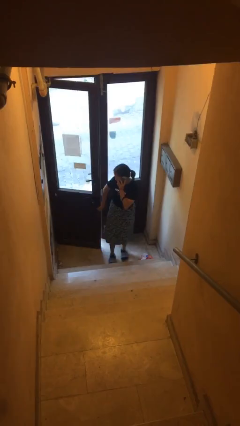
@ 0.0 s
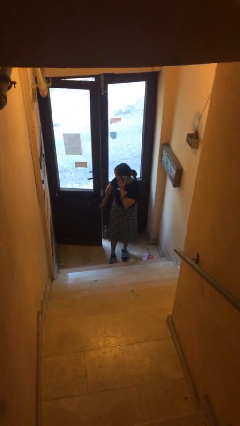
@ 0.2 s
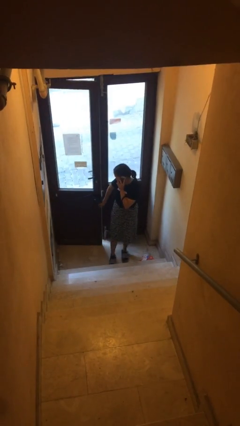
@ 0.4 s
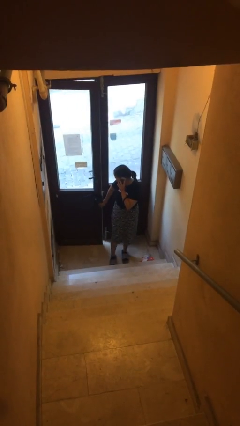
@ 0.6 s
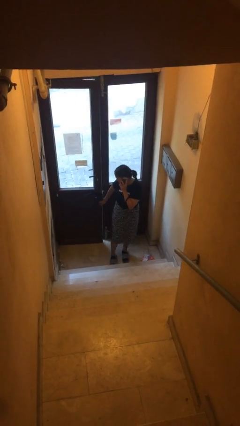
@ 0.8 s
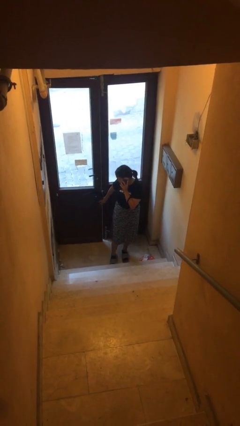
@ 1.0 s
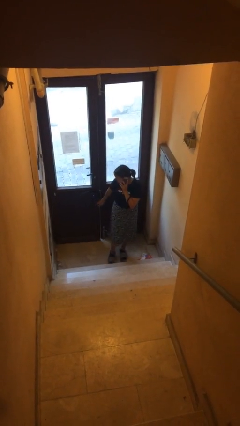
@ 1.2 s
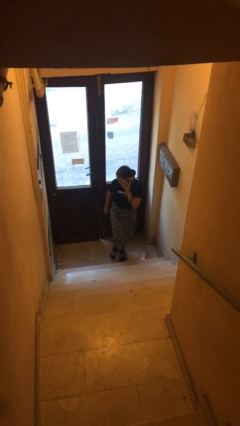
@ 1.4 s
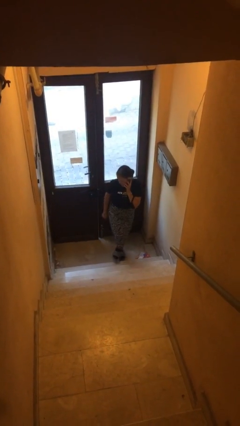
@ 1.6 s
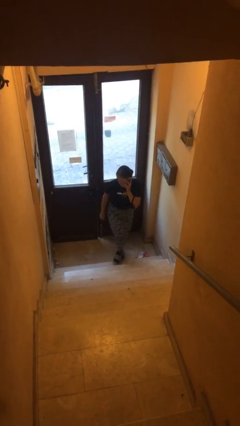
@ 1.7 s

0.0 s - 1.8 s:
person closes facility door

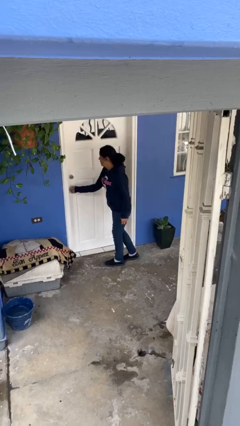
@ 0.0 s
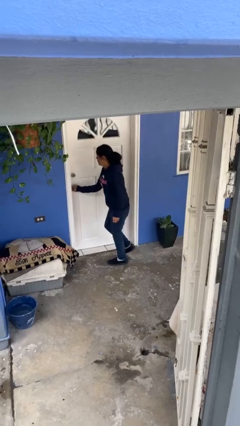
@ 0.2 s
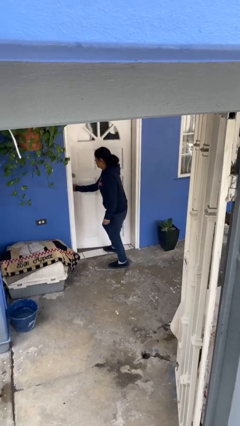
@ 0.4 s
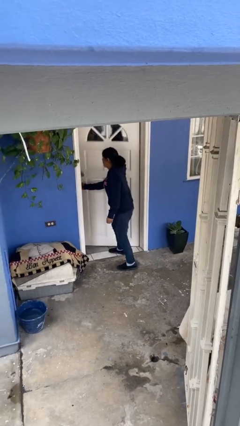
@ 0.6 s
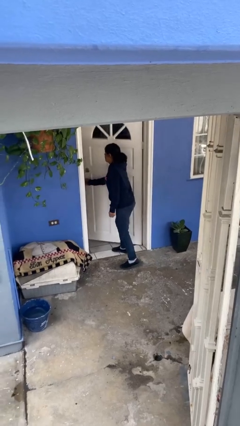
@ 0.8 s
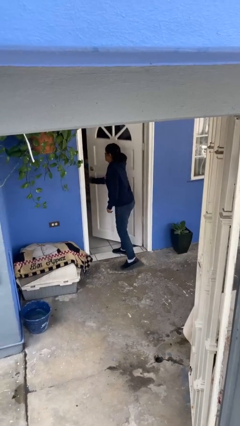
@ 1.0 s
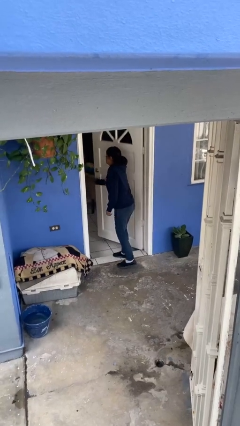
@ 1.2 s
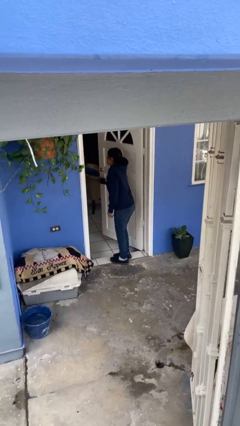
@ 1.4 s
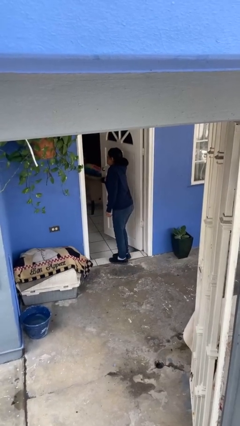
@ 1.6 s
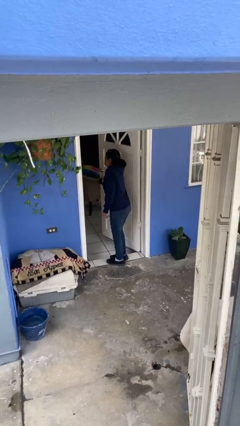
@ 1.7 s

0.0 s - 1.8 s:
person opens facility door

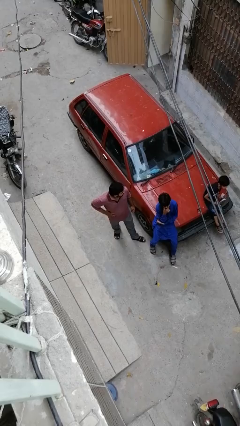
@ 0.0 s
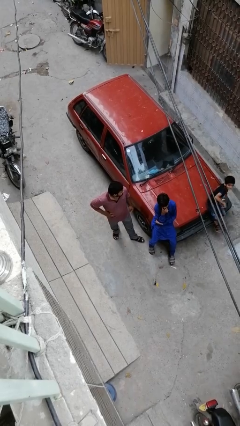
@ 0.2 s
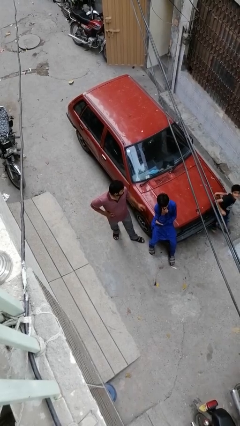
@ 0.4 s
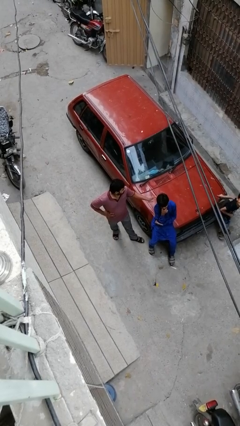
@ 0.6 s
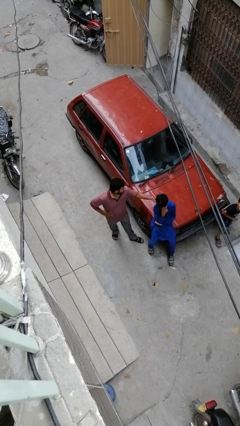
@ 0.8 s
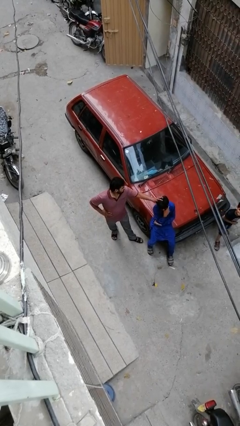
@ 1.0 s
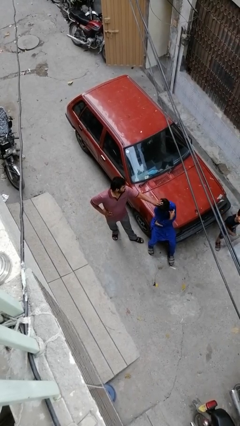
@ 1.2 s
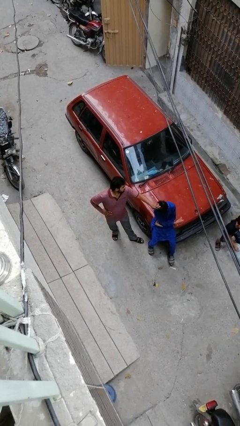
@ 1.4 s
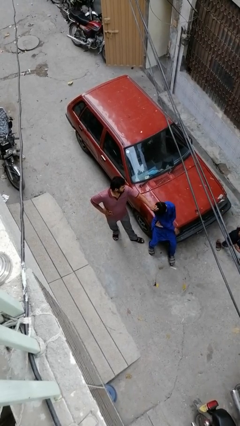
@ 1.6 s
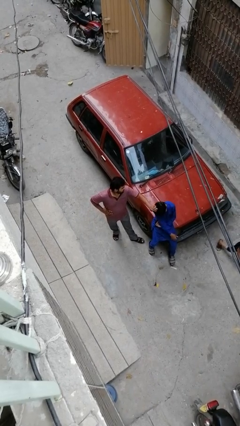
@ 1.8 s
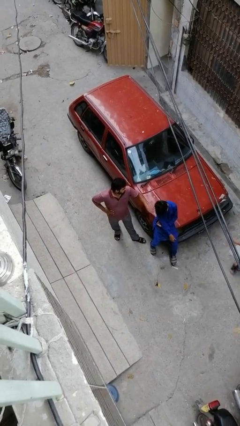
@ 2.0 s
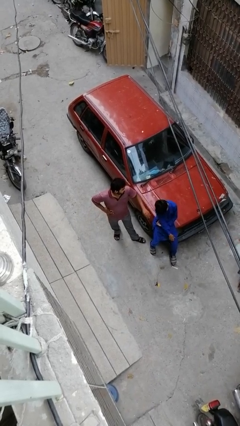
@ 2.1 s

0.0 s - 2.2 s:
person grabs person by hair

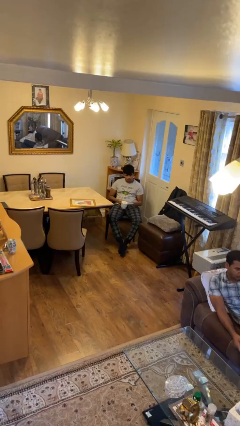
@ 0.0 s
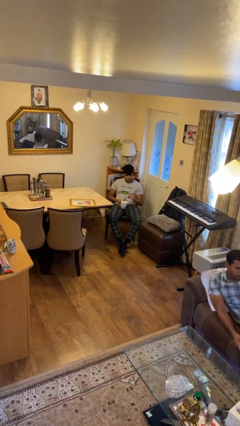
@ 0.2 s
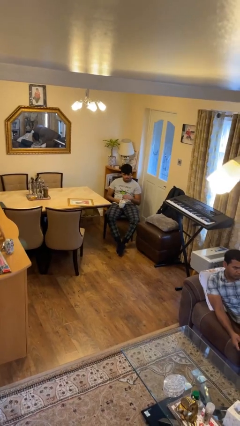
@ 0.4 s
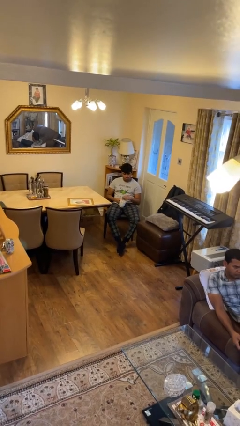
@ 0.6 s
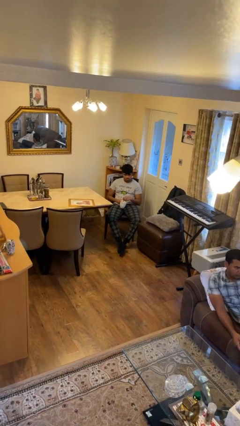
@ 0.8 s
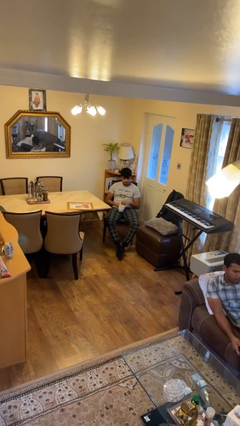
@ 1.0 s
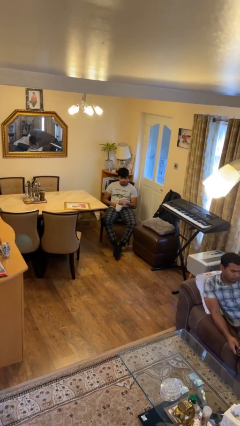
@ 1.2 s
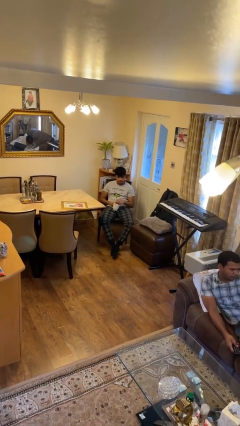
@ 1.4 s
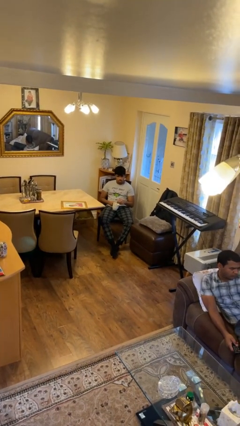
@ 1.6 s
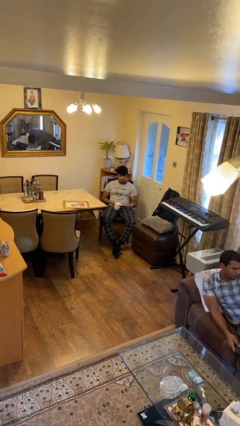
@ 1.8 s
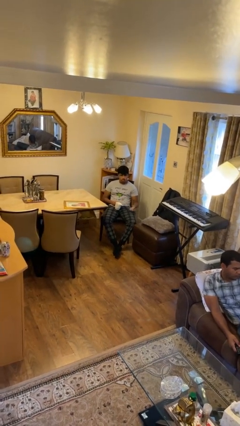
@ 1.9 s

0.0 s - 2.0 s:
person stirs mug

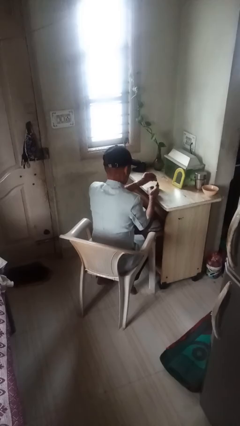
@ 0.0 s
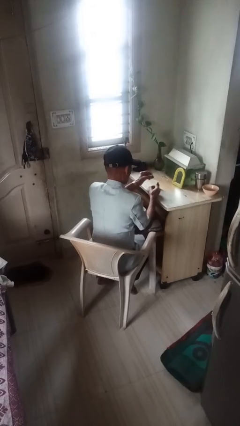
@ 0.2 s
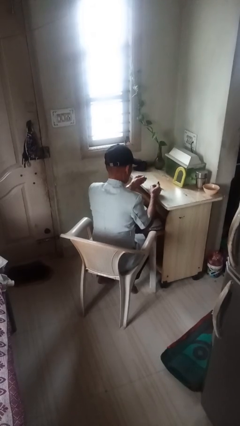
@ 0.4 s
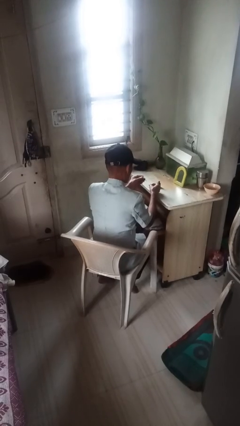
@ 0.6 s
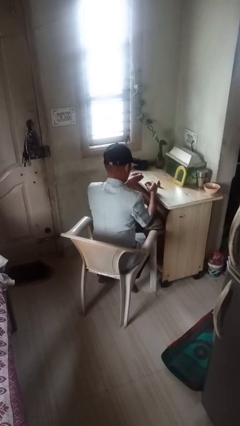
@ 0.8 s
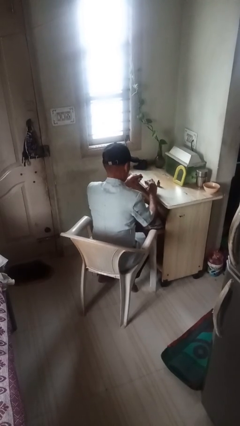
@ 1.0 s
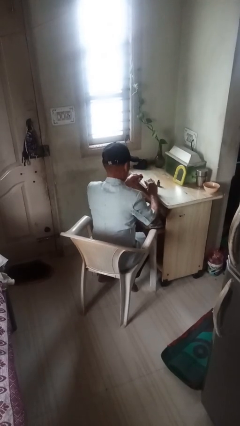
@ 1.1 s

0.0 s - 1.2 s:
person paints fingernails

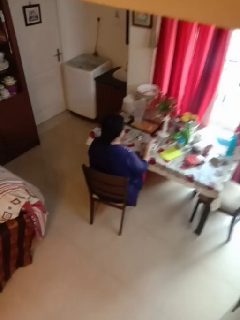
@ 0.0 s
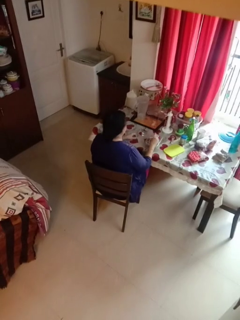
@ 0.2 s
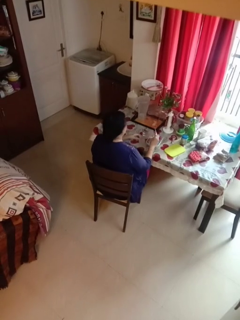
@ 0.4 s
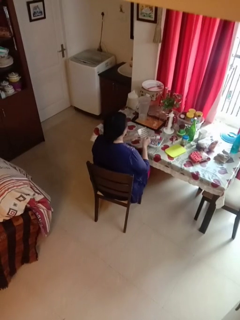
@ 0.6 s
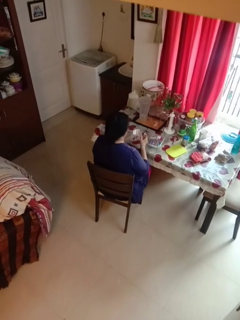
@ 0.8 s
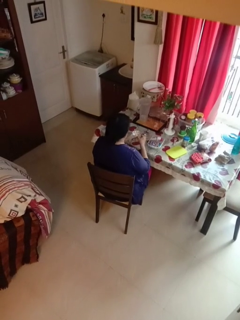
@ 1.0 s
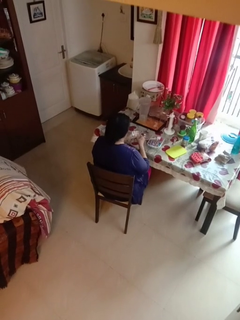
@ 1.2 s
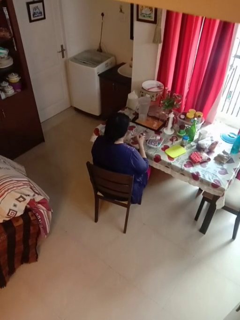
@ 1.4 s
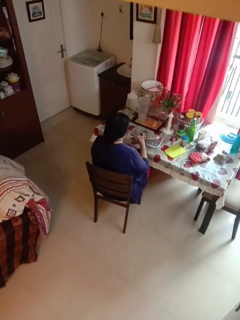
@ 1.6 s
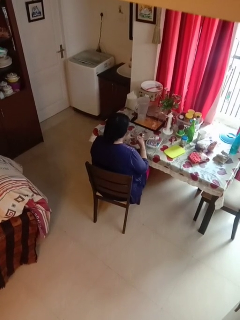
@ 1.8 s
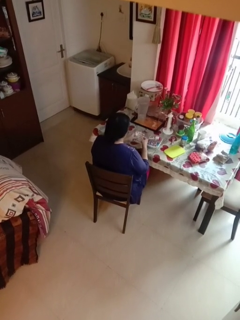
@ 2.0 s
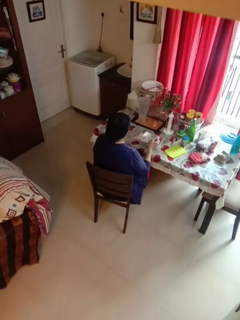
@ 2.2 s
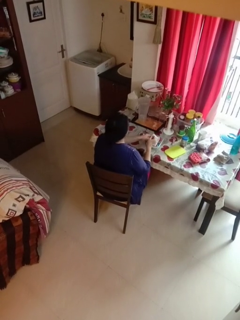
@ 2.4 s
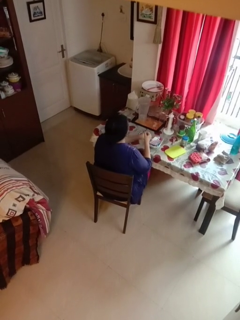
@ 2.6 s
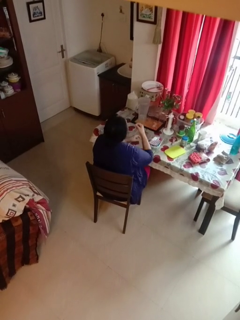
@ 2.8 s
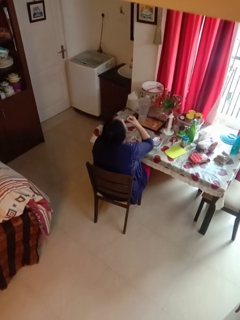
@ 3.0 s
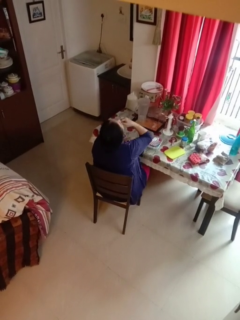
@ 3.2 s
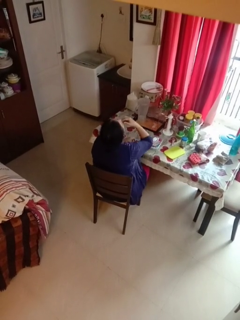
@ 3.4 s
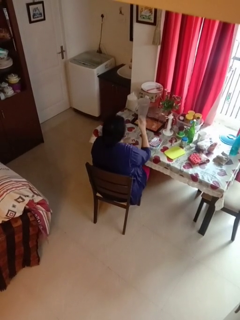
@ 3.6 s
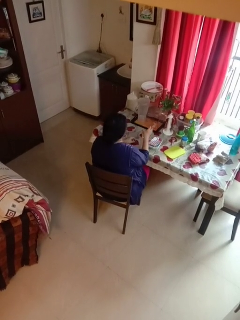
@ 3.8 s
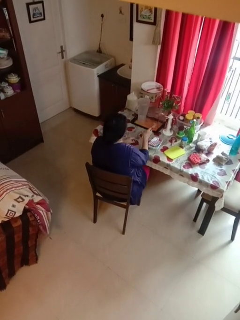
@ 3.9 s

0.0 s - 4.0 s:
person takes medicine pills

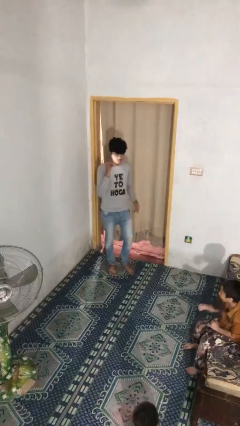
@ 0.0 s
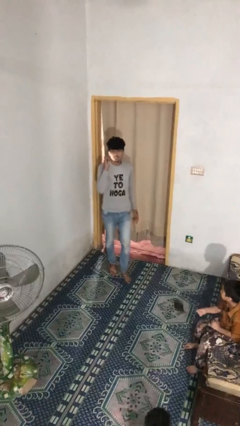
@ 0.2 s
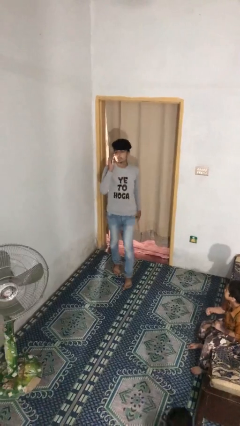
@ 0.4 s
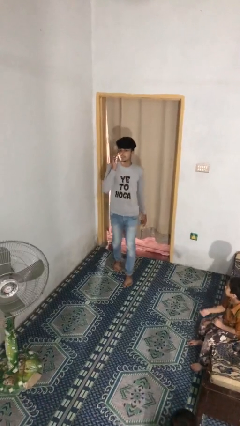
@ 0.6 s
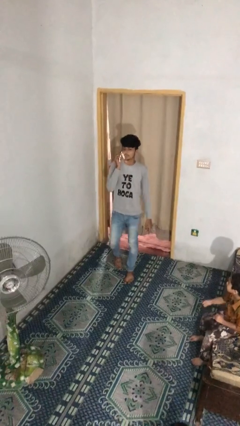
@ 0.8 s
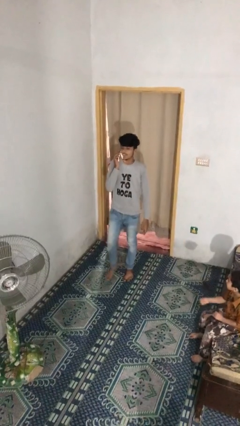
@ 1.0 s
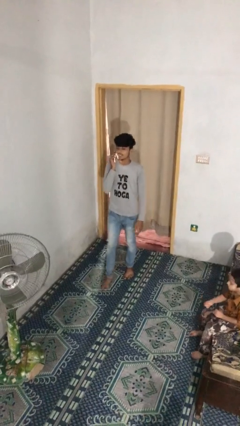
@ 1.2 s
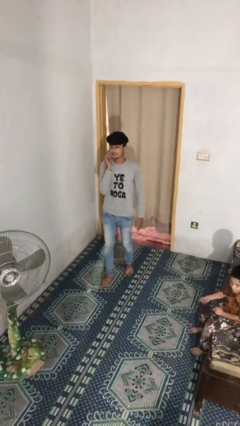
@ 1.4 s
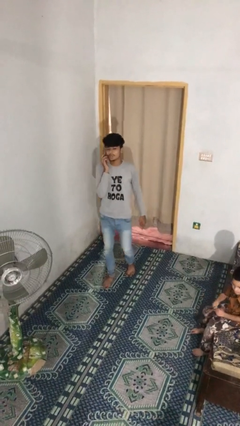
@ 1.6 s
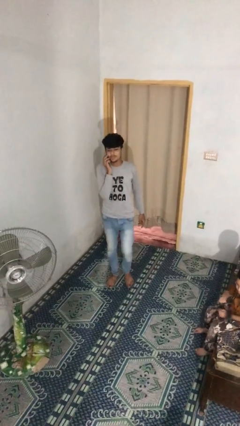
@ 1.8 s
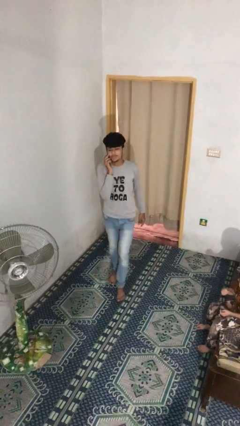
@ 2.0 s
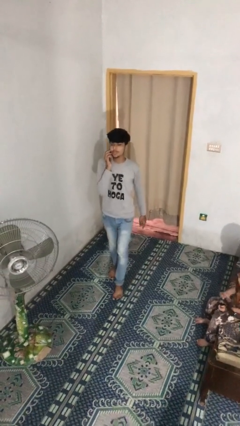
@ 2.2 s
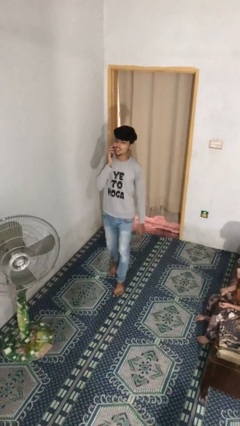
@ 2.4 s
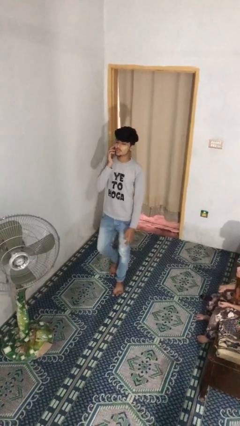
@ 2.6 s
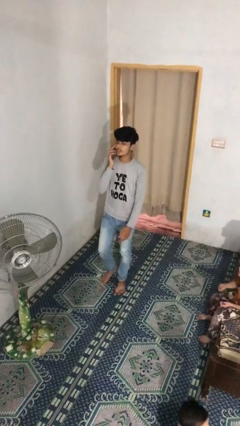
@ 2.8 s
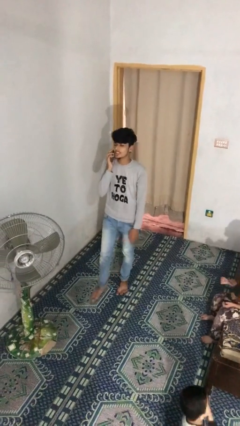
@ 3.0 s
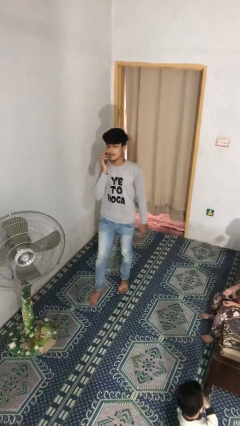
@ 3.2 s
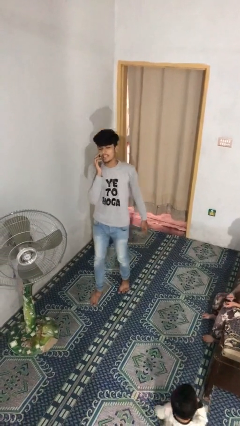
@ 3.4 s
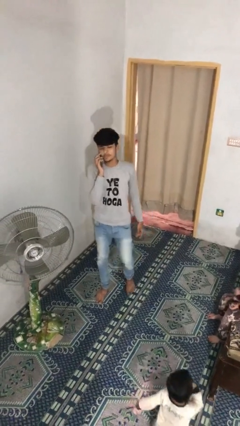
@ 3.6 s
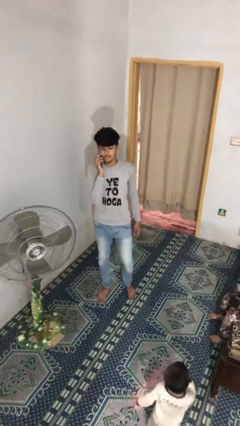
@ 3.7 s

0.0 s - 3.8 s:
person talks on phone

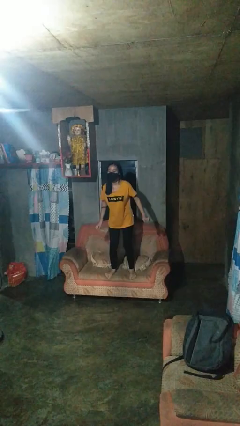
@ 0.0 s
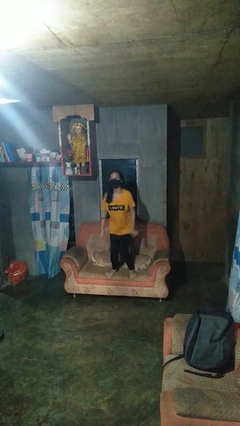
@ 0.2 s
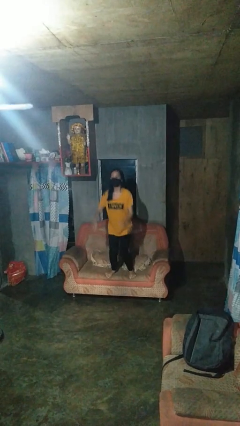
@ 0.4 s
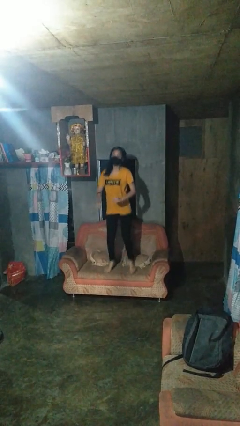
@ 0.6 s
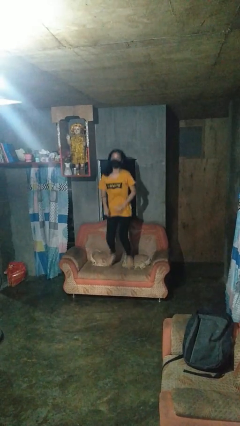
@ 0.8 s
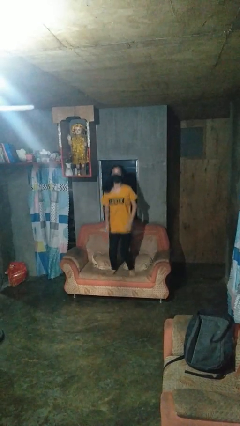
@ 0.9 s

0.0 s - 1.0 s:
person jumps on couch

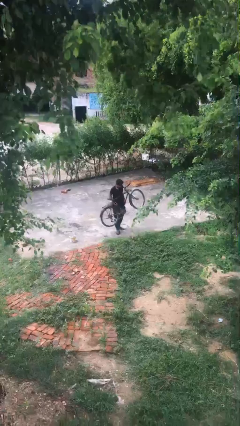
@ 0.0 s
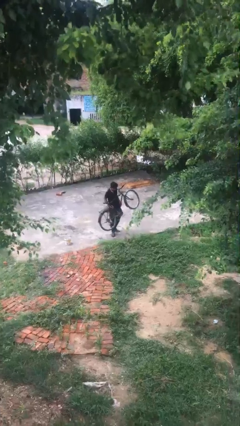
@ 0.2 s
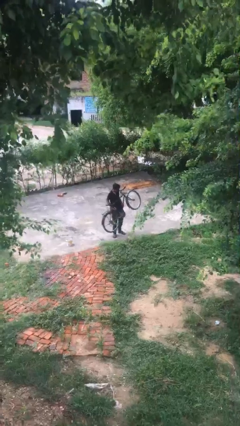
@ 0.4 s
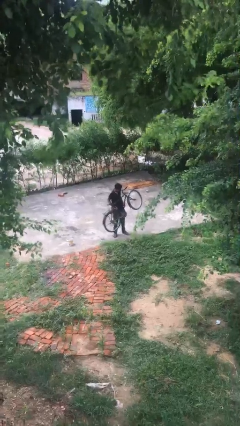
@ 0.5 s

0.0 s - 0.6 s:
person puts down object on floor
